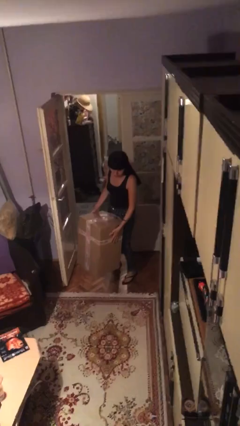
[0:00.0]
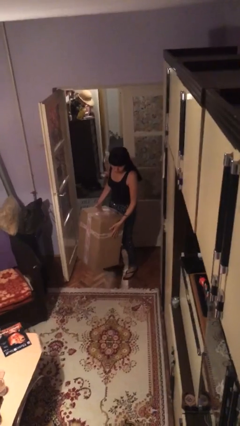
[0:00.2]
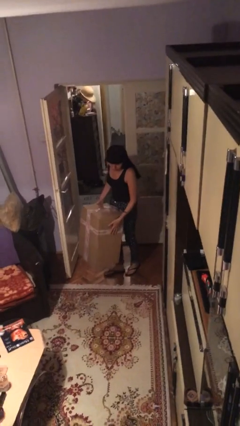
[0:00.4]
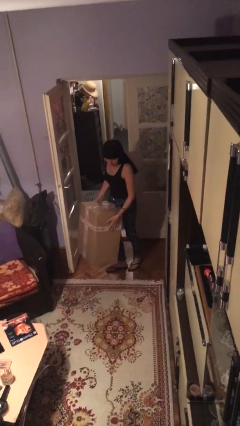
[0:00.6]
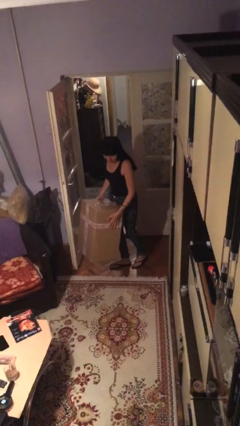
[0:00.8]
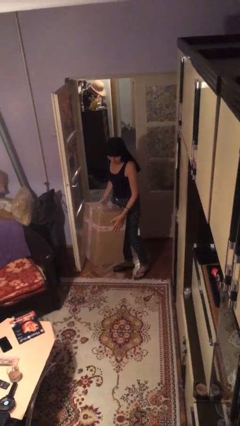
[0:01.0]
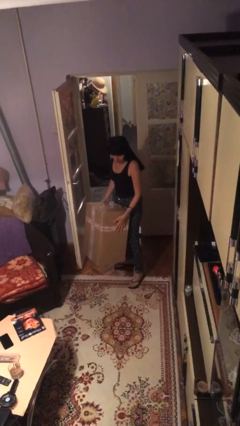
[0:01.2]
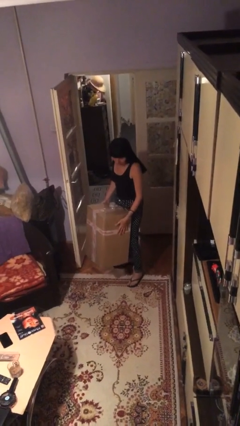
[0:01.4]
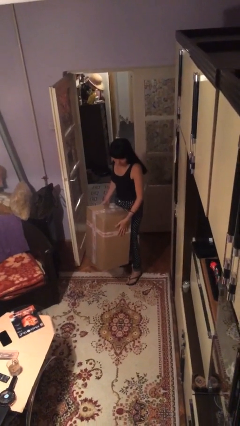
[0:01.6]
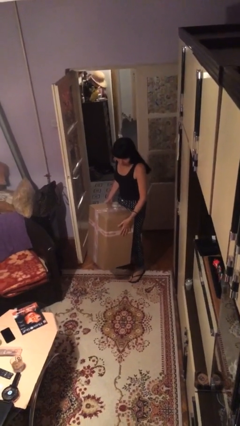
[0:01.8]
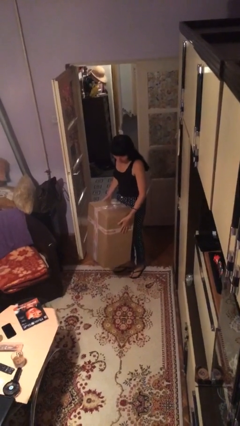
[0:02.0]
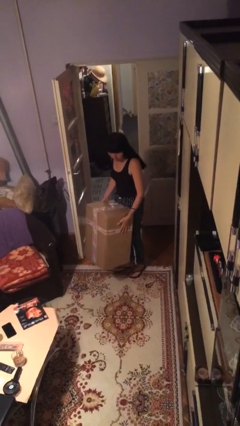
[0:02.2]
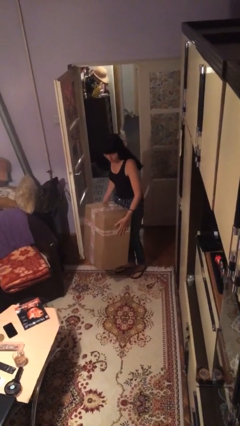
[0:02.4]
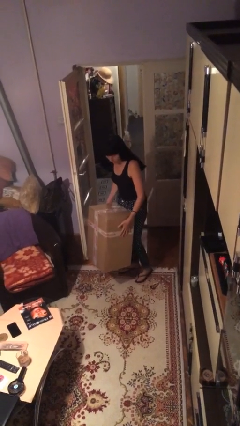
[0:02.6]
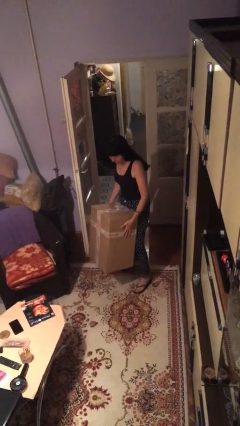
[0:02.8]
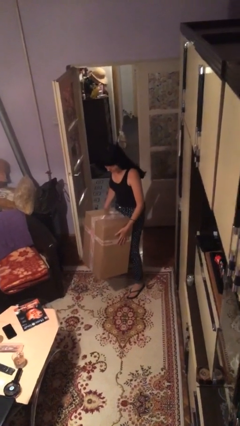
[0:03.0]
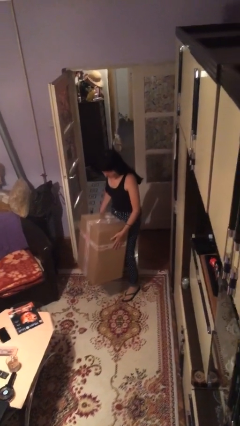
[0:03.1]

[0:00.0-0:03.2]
person carries heavy object

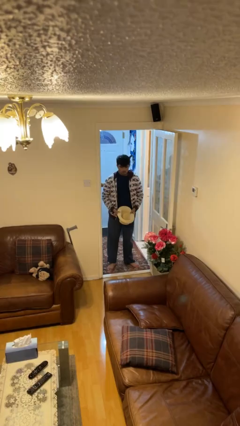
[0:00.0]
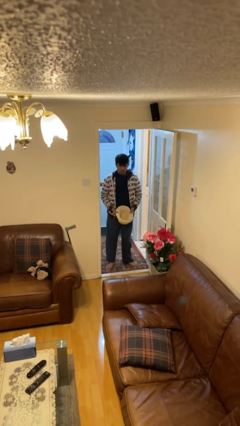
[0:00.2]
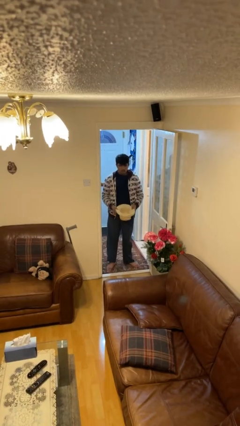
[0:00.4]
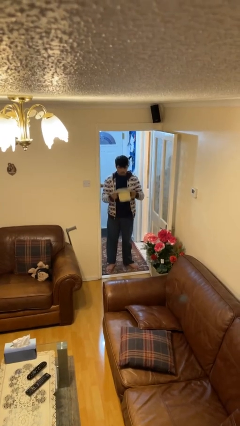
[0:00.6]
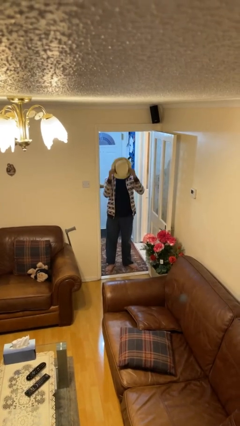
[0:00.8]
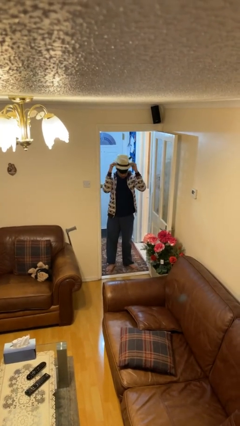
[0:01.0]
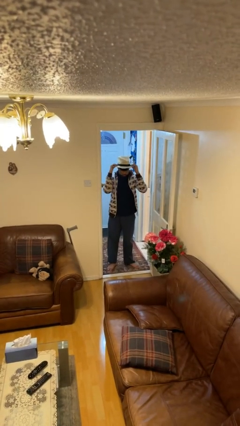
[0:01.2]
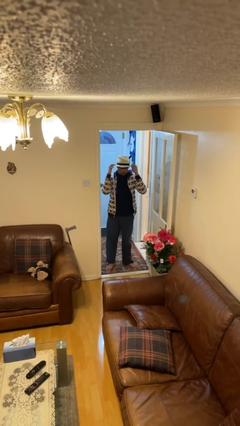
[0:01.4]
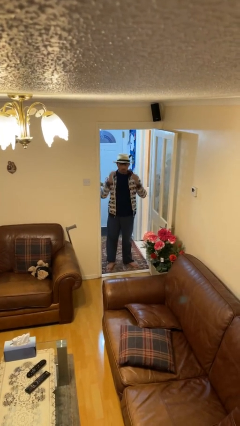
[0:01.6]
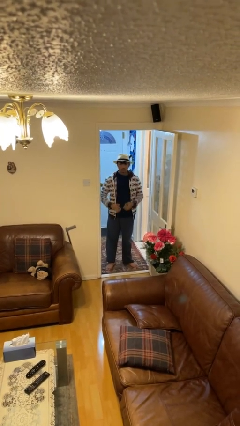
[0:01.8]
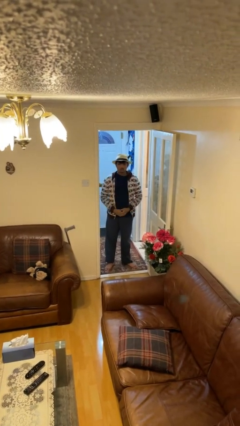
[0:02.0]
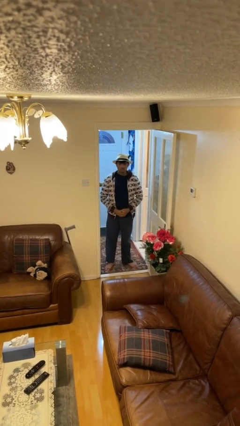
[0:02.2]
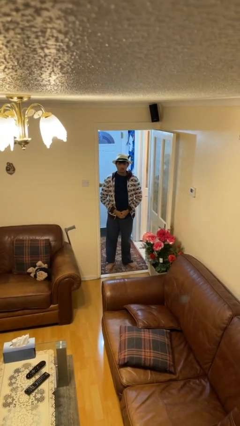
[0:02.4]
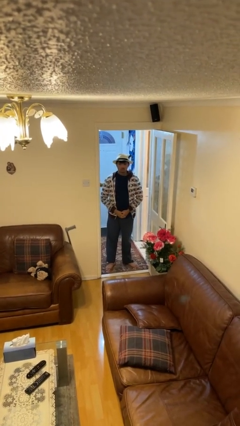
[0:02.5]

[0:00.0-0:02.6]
person puts on hat

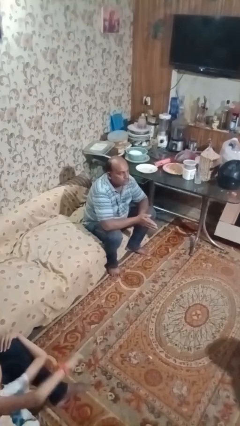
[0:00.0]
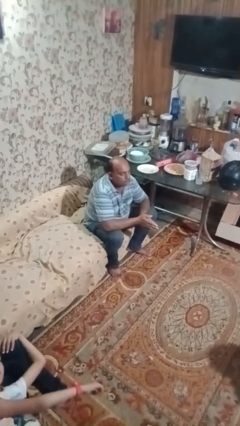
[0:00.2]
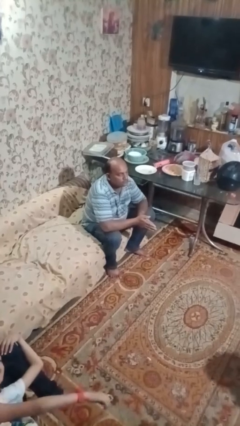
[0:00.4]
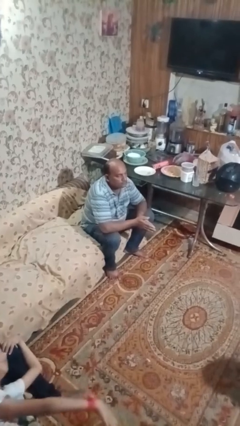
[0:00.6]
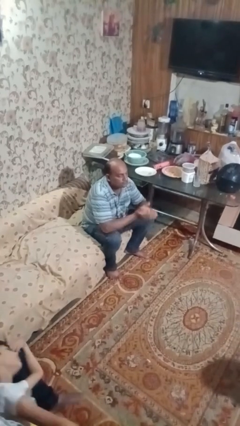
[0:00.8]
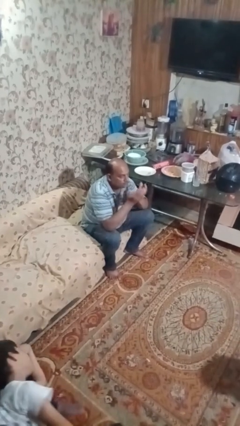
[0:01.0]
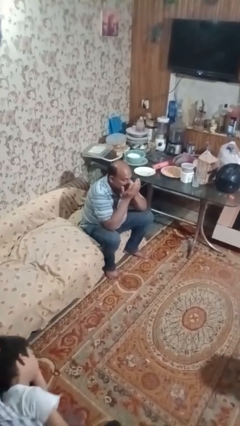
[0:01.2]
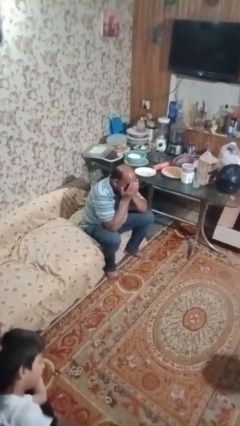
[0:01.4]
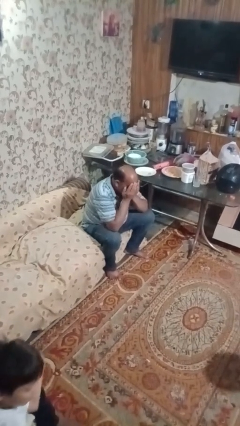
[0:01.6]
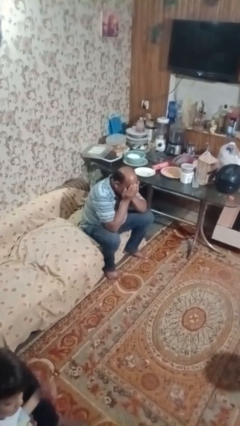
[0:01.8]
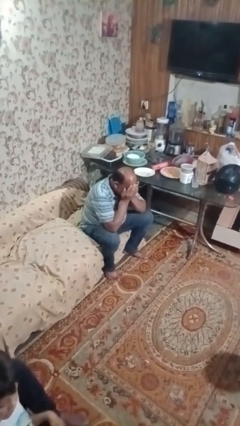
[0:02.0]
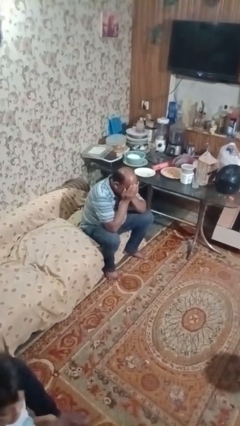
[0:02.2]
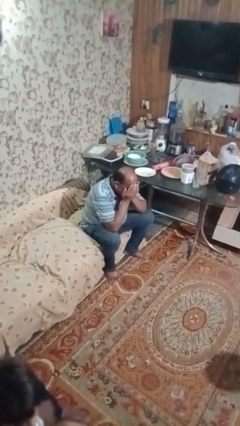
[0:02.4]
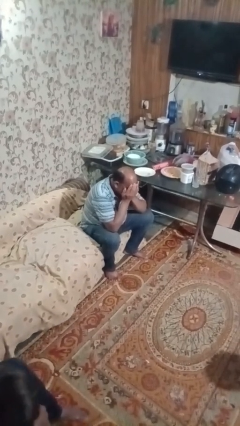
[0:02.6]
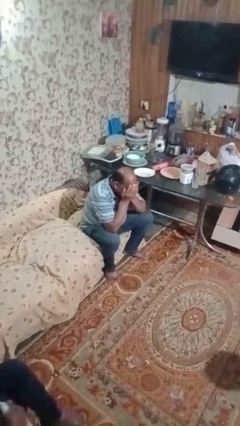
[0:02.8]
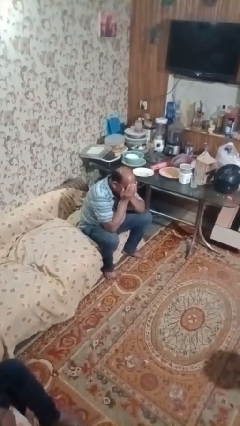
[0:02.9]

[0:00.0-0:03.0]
person covers face with hands

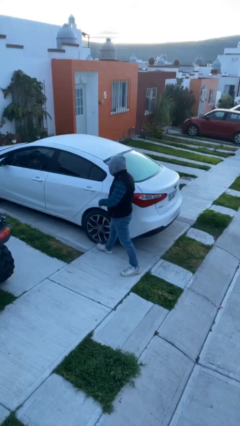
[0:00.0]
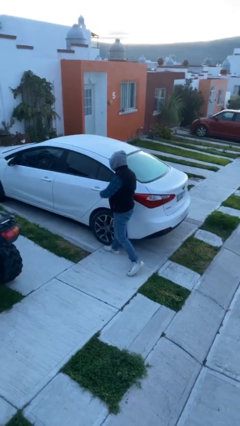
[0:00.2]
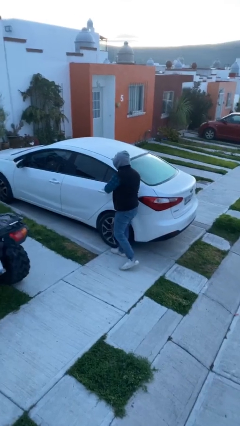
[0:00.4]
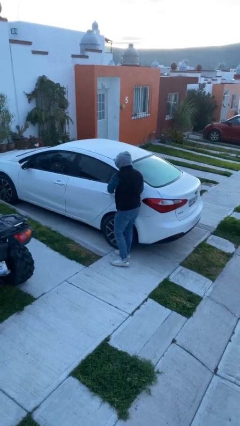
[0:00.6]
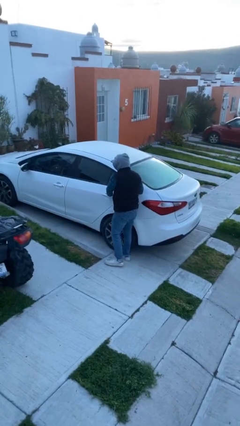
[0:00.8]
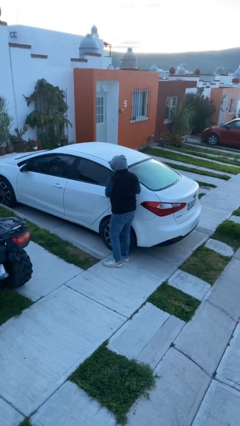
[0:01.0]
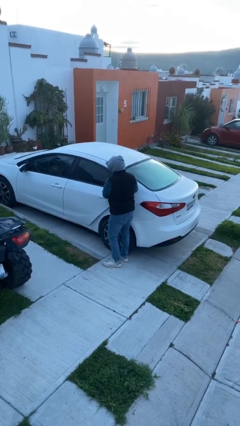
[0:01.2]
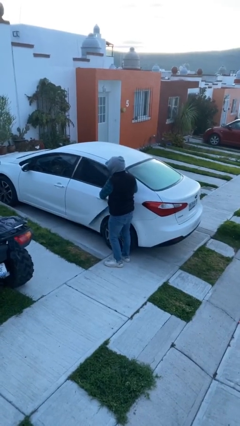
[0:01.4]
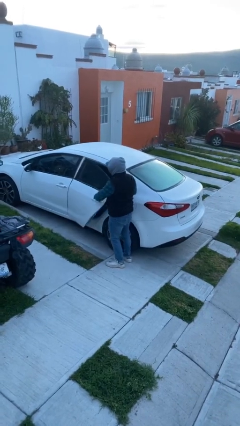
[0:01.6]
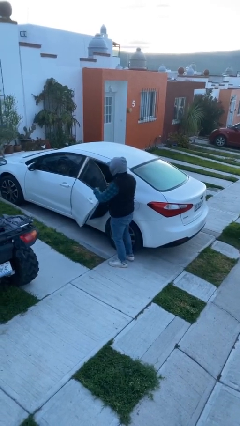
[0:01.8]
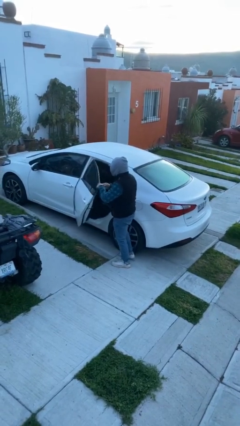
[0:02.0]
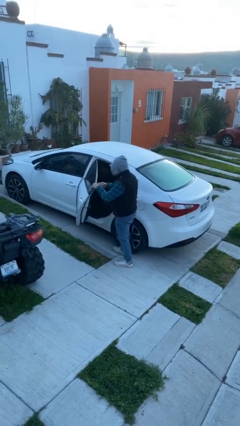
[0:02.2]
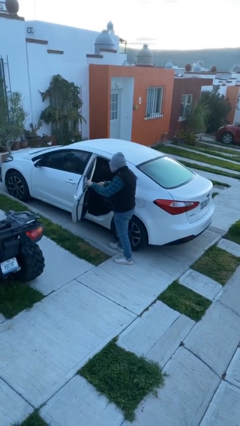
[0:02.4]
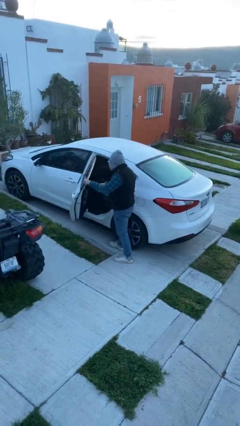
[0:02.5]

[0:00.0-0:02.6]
person opens car door

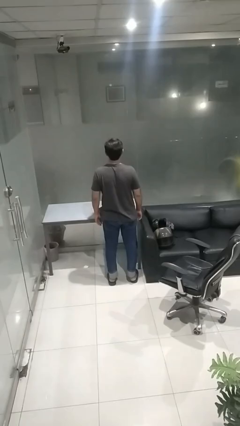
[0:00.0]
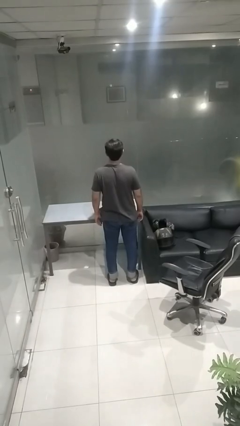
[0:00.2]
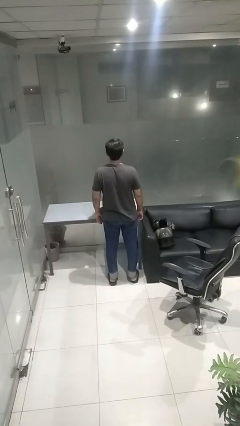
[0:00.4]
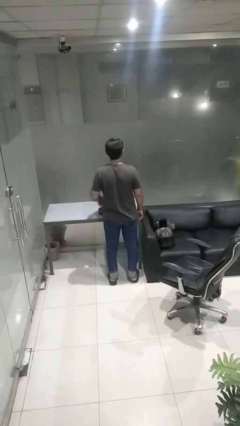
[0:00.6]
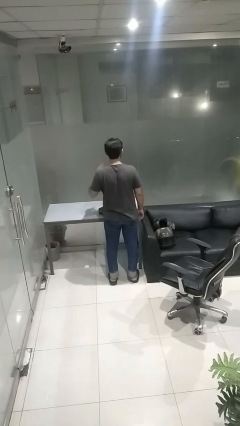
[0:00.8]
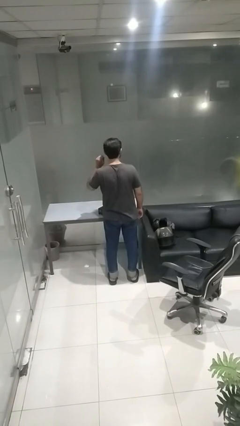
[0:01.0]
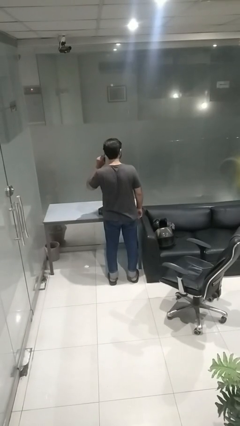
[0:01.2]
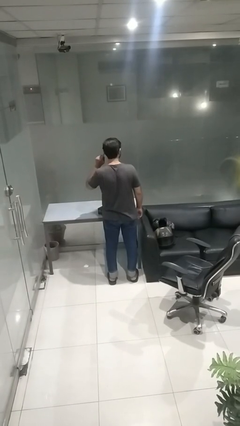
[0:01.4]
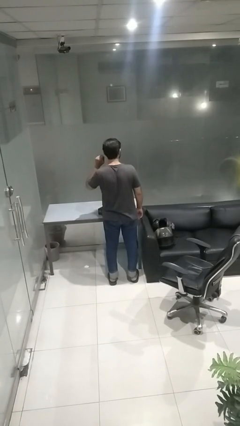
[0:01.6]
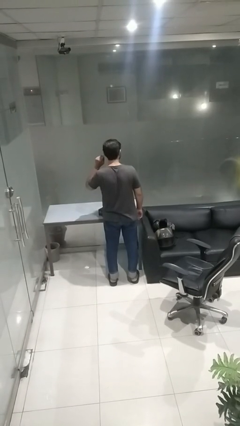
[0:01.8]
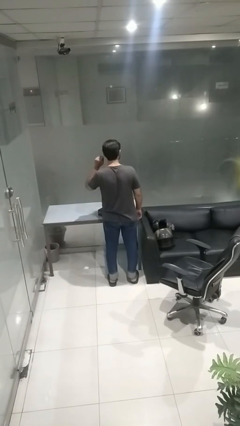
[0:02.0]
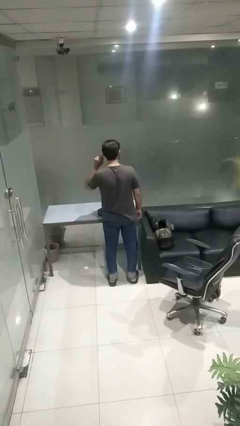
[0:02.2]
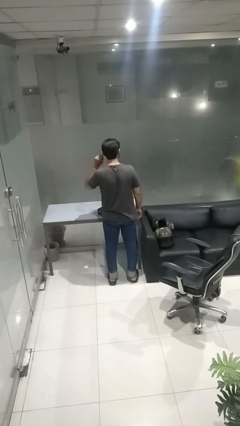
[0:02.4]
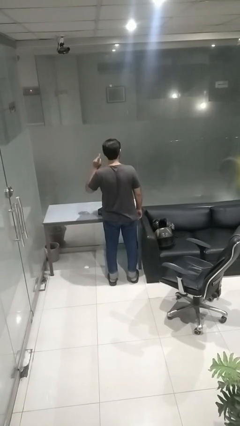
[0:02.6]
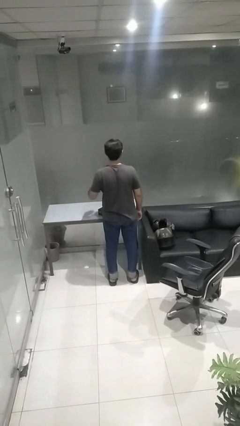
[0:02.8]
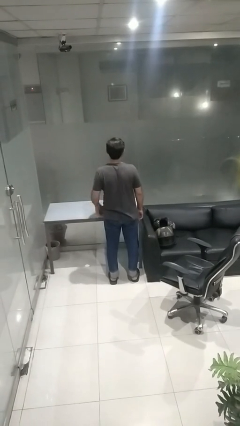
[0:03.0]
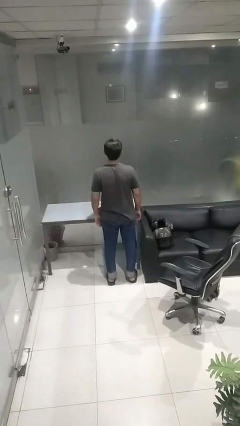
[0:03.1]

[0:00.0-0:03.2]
person gestures listen closely

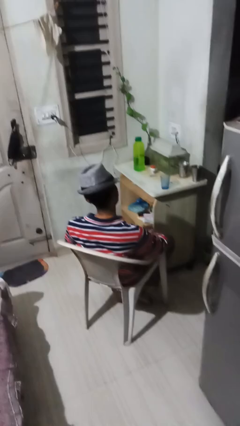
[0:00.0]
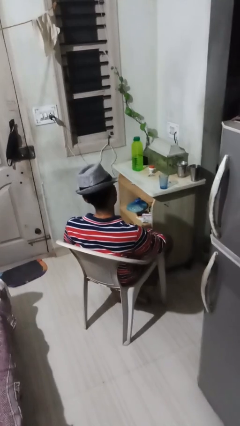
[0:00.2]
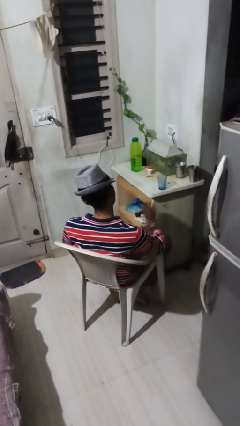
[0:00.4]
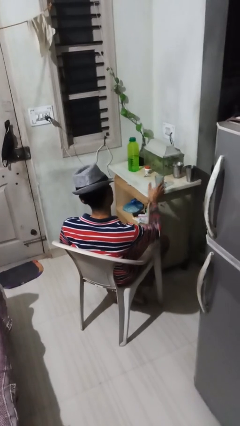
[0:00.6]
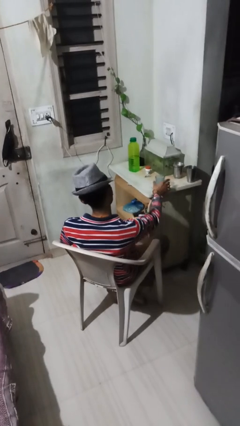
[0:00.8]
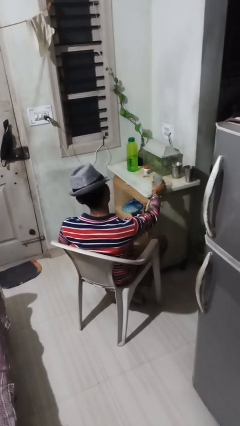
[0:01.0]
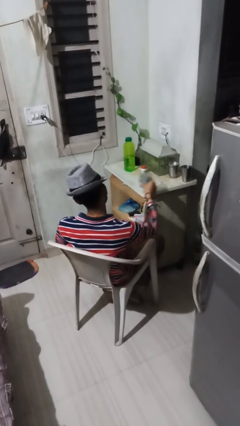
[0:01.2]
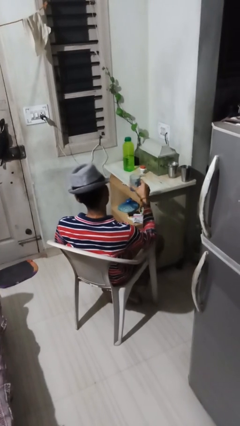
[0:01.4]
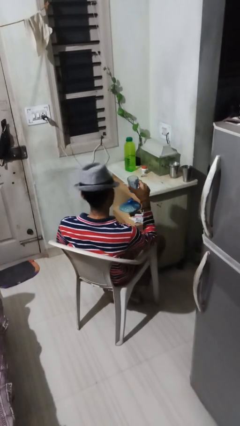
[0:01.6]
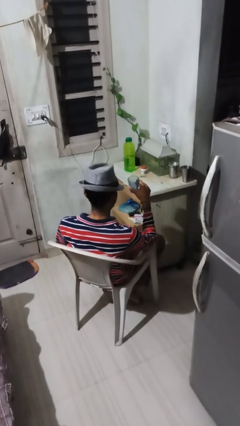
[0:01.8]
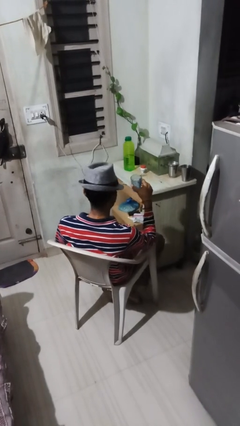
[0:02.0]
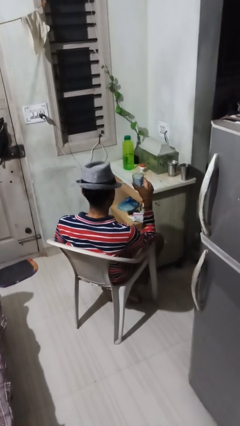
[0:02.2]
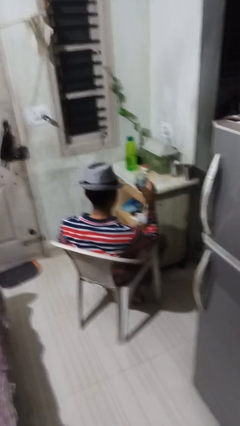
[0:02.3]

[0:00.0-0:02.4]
person picks up object from table
